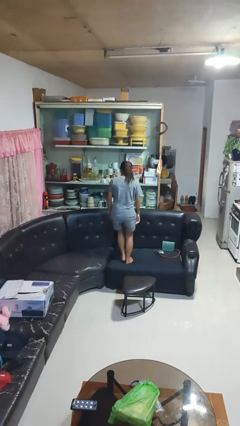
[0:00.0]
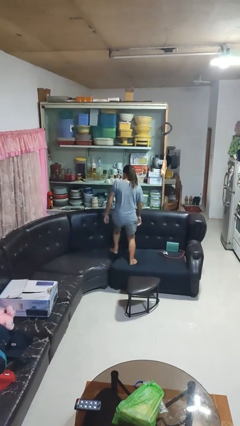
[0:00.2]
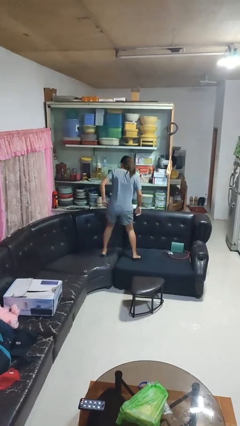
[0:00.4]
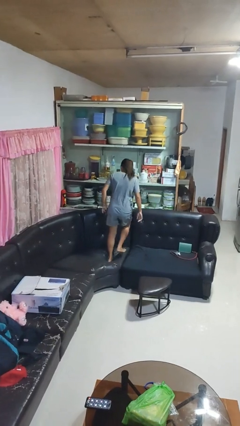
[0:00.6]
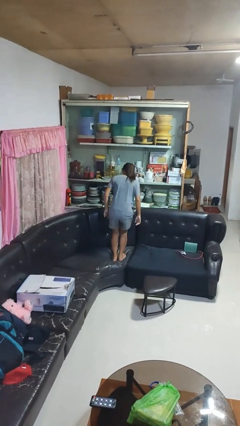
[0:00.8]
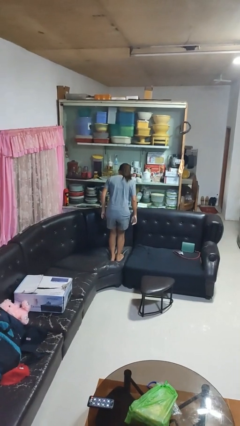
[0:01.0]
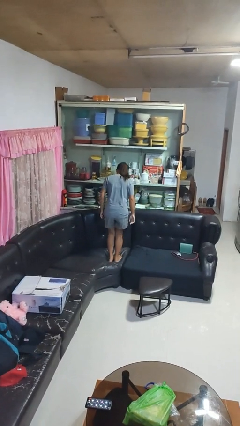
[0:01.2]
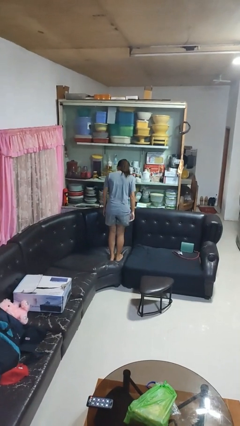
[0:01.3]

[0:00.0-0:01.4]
person jumps on couch

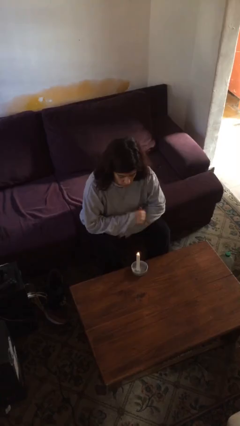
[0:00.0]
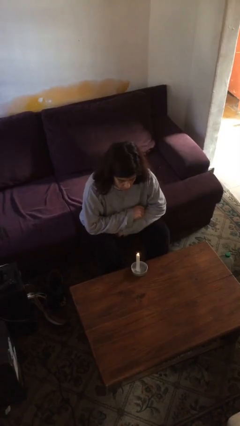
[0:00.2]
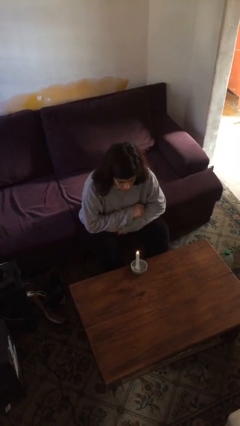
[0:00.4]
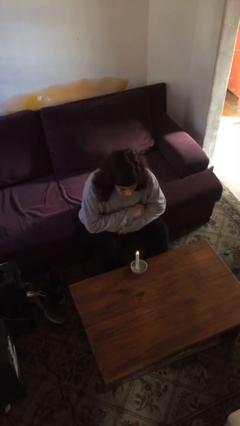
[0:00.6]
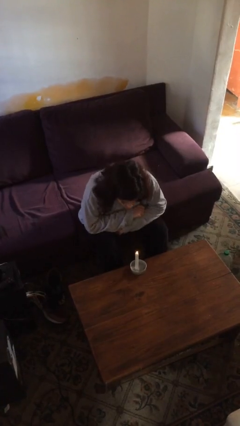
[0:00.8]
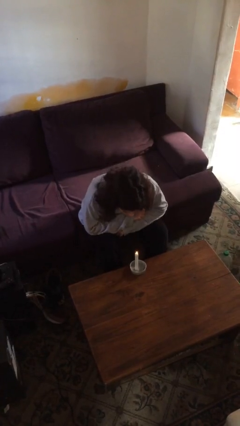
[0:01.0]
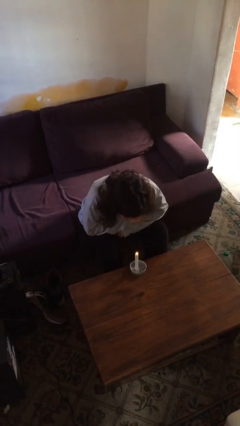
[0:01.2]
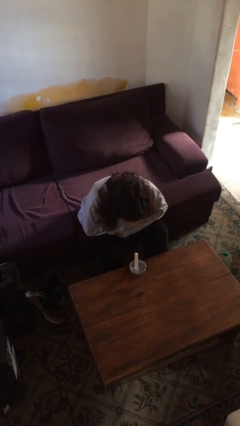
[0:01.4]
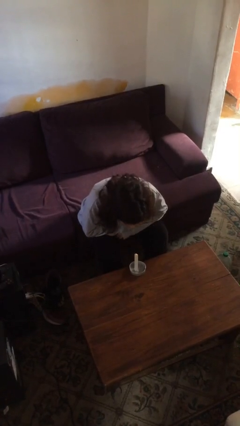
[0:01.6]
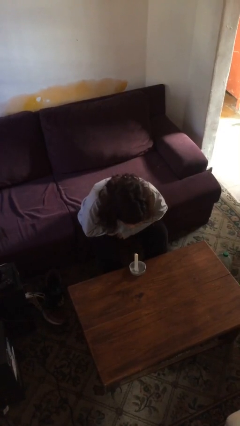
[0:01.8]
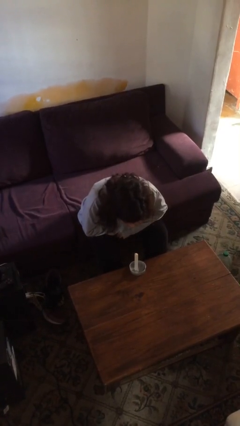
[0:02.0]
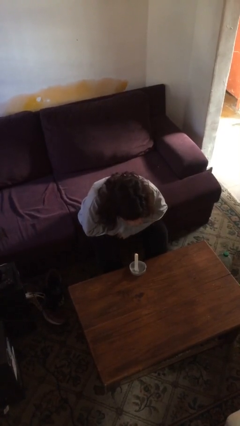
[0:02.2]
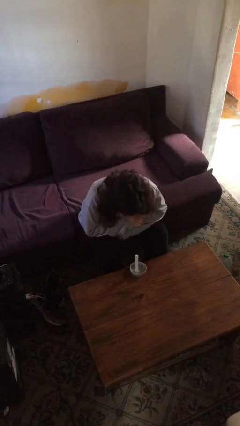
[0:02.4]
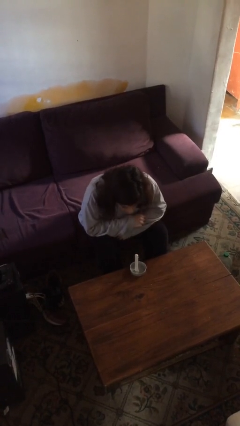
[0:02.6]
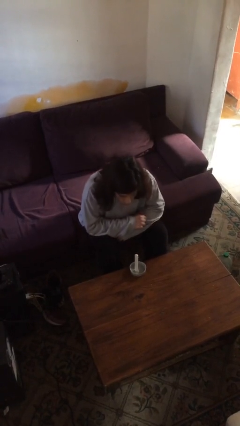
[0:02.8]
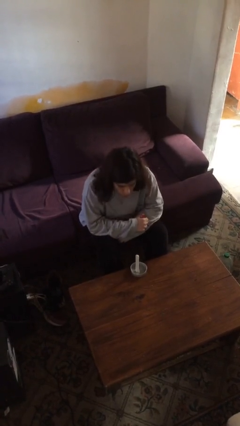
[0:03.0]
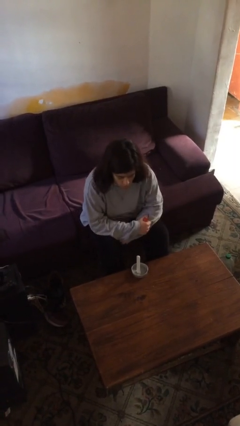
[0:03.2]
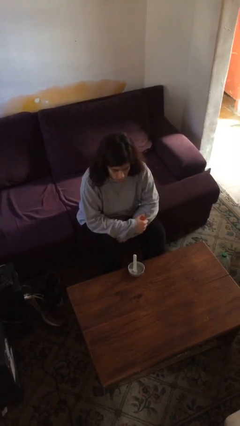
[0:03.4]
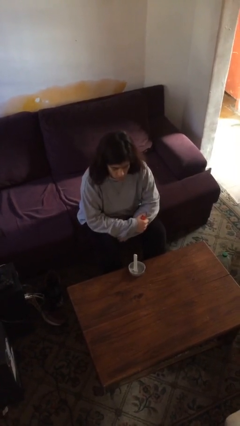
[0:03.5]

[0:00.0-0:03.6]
person extinguishes candle

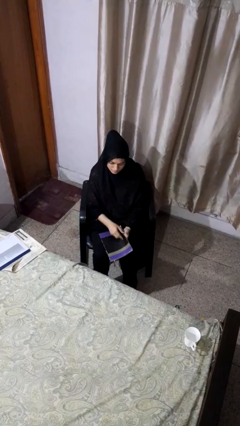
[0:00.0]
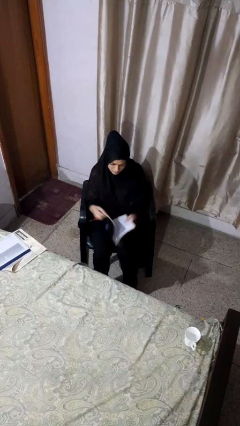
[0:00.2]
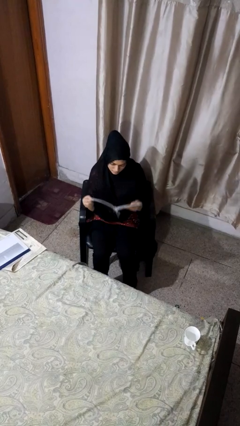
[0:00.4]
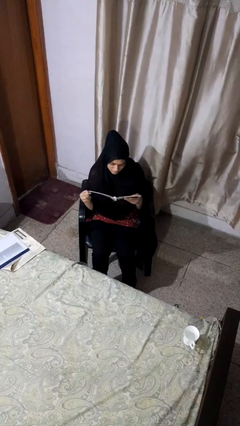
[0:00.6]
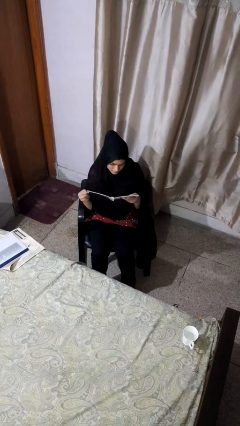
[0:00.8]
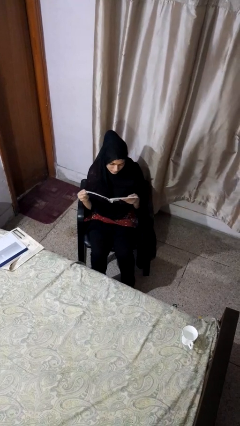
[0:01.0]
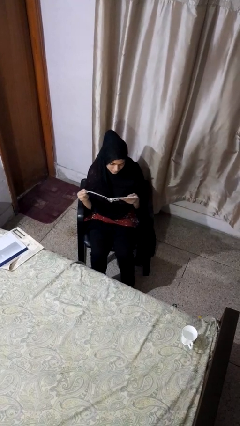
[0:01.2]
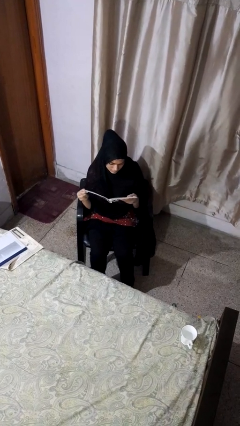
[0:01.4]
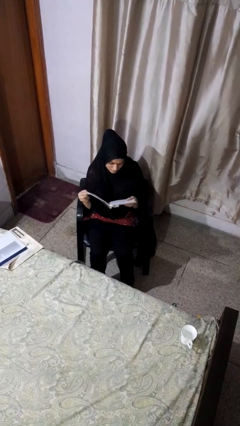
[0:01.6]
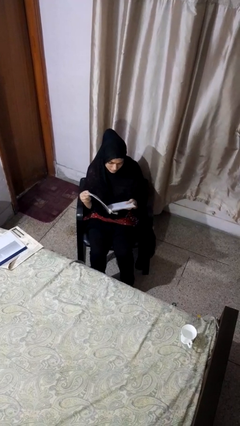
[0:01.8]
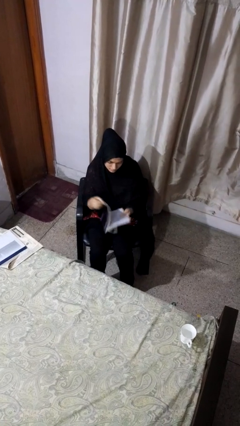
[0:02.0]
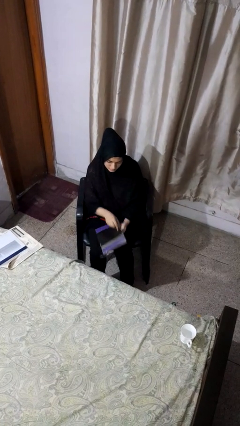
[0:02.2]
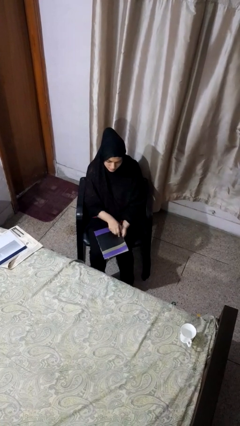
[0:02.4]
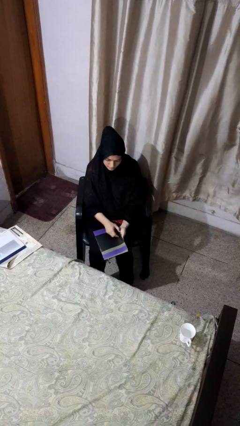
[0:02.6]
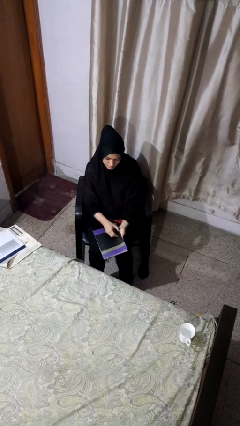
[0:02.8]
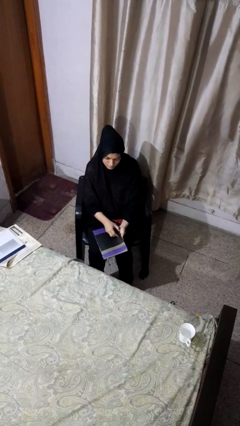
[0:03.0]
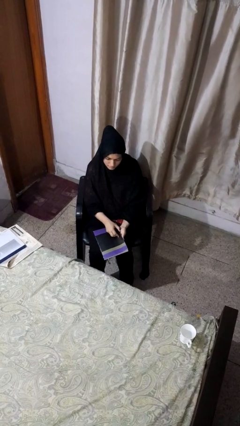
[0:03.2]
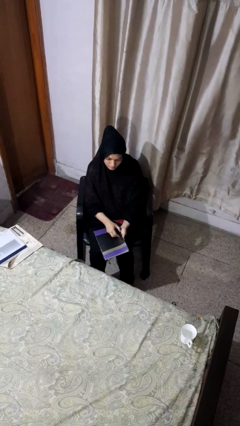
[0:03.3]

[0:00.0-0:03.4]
person reads book

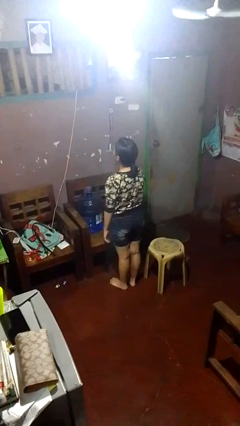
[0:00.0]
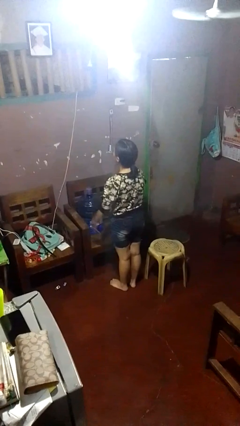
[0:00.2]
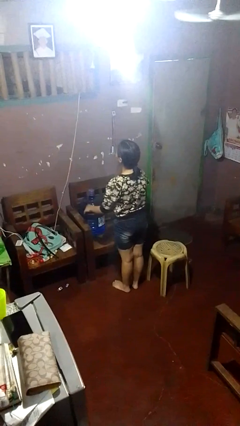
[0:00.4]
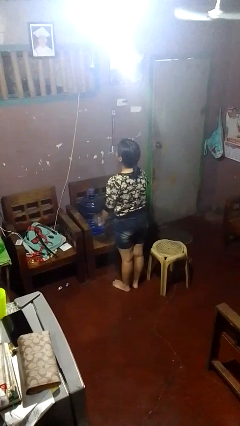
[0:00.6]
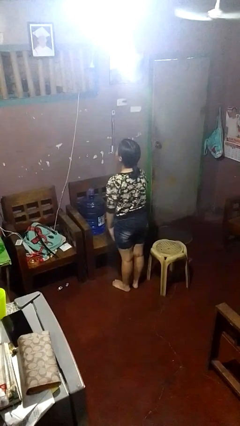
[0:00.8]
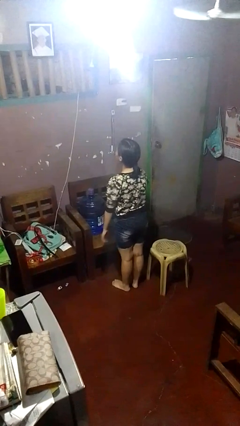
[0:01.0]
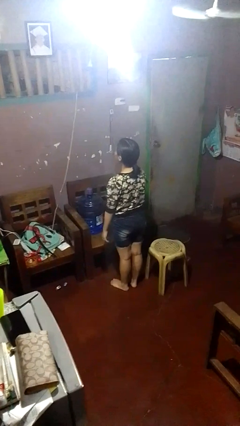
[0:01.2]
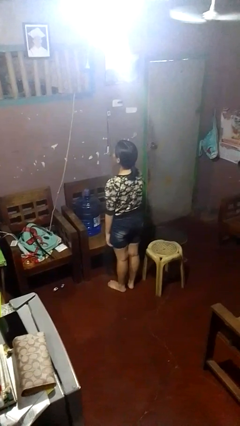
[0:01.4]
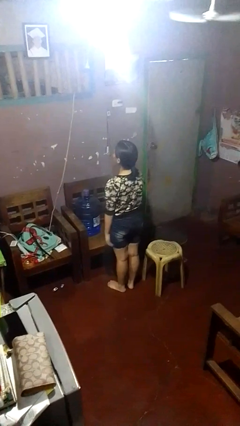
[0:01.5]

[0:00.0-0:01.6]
person slaps hands on thighs

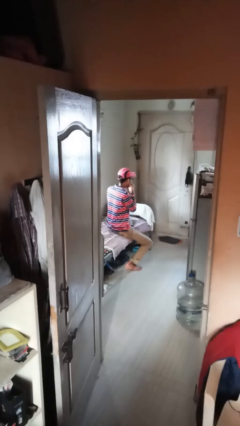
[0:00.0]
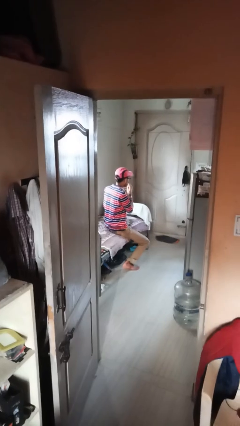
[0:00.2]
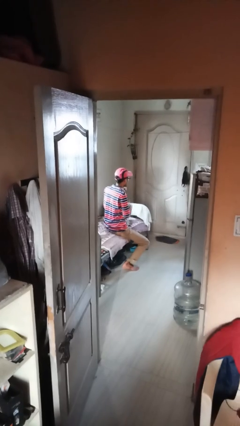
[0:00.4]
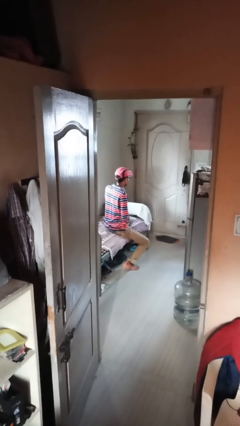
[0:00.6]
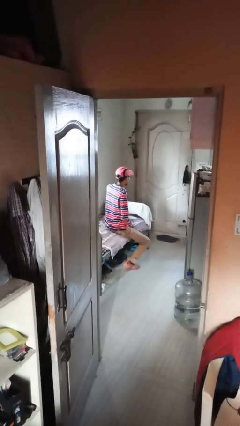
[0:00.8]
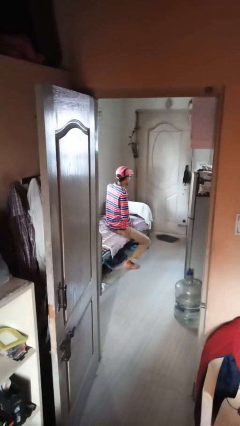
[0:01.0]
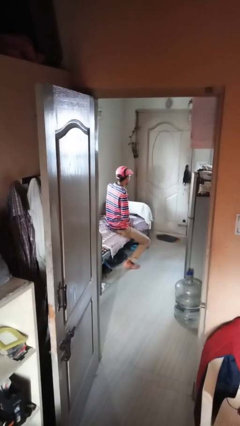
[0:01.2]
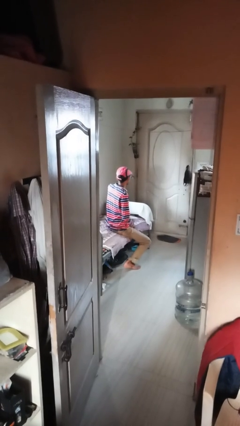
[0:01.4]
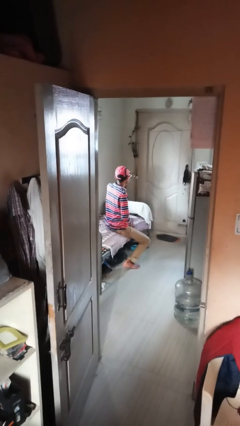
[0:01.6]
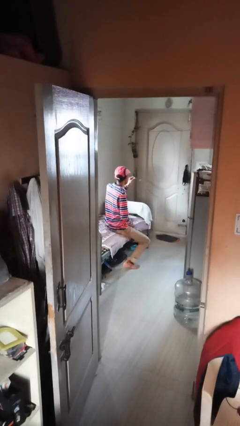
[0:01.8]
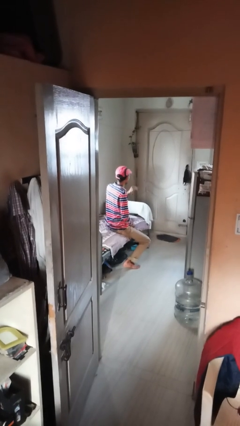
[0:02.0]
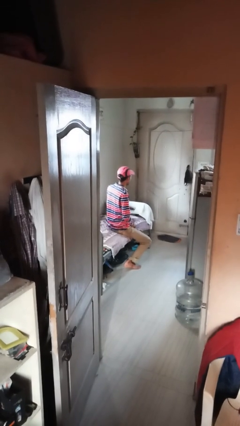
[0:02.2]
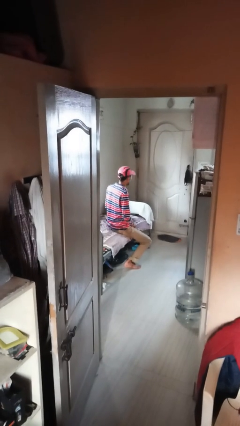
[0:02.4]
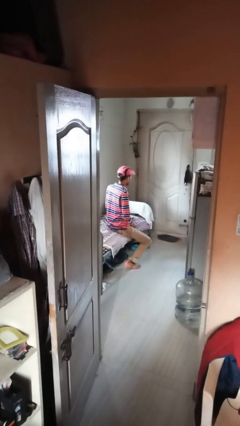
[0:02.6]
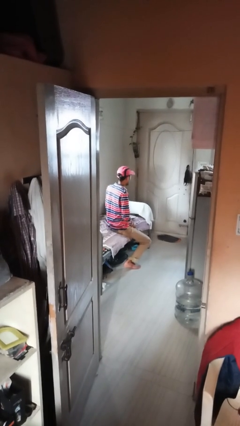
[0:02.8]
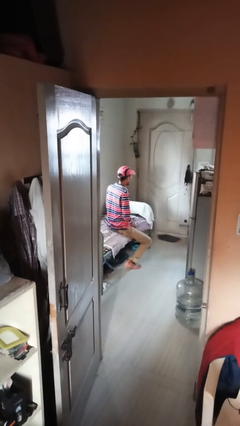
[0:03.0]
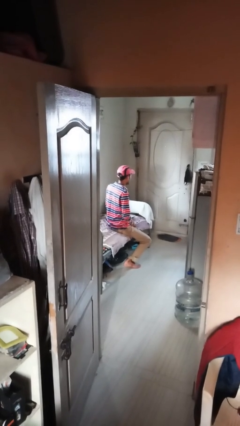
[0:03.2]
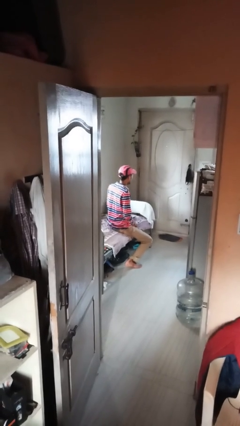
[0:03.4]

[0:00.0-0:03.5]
person takes off glasses

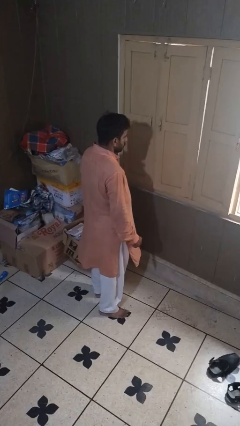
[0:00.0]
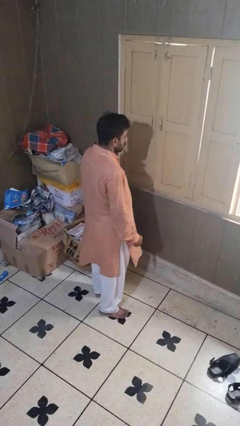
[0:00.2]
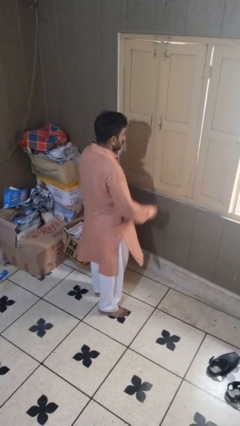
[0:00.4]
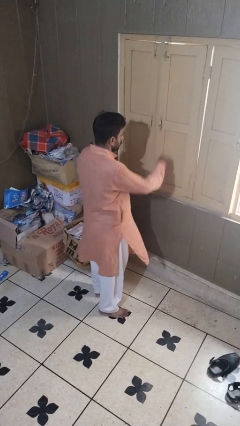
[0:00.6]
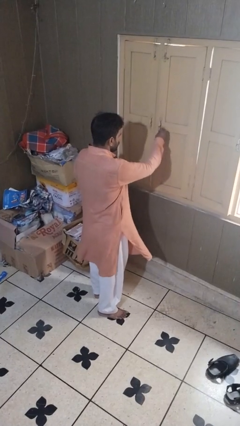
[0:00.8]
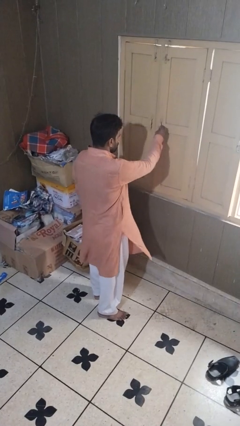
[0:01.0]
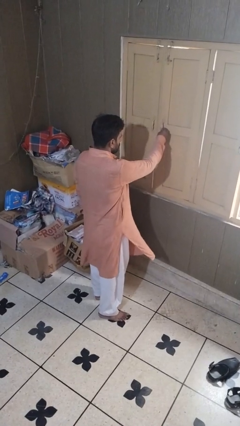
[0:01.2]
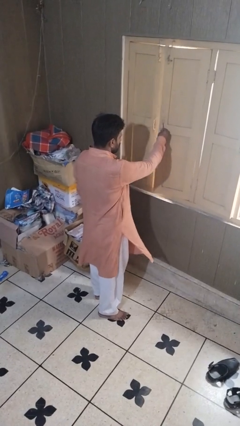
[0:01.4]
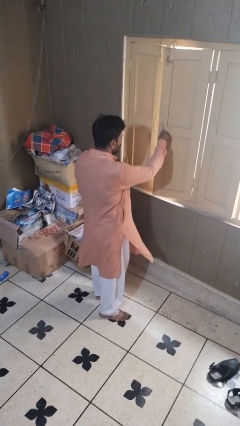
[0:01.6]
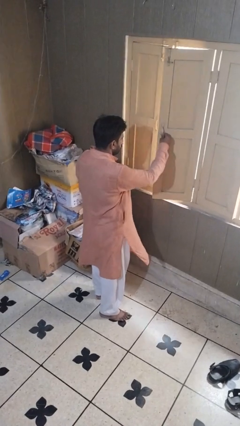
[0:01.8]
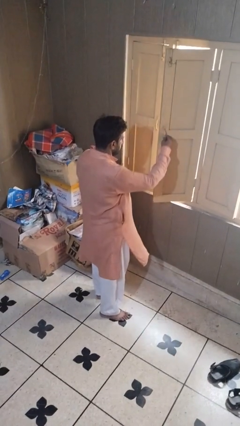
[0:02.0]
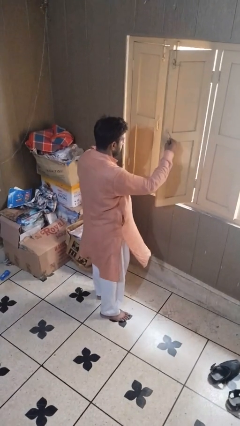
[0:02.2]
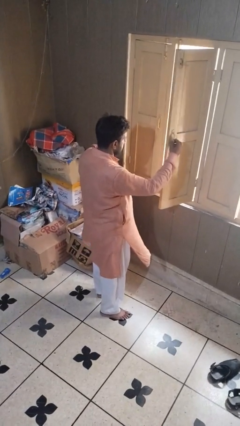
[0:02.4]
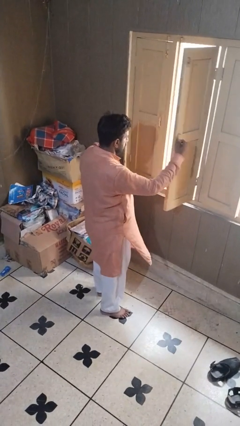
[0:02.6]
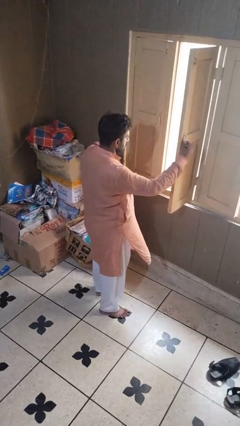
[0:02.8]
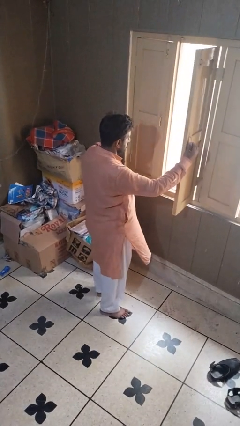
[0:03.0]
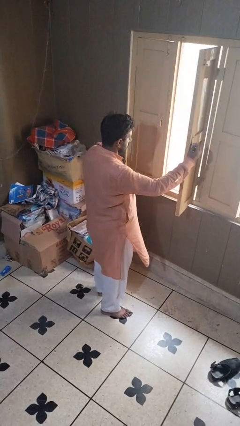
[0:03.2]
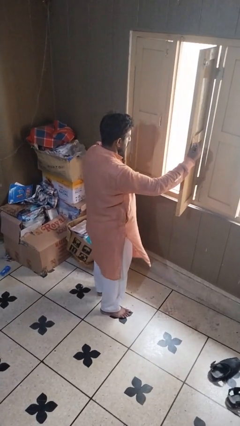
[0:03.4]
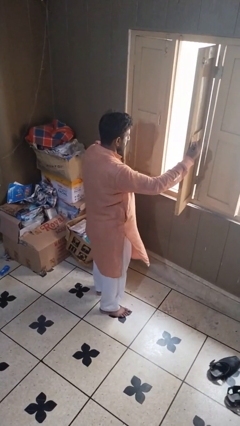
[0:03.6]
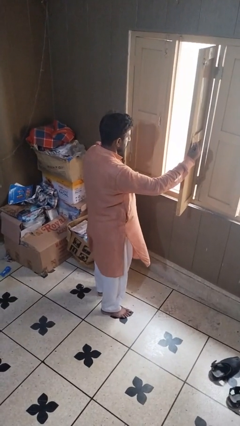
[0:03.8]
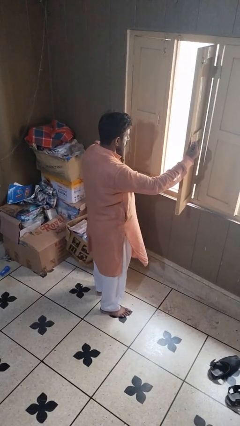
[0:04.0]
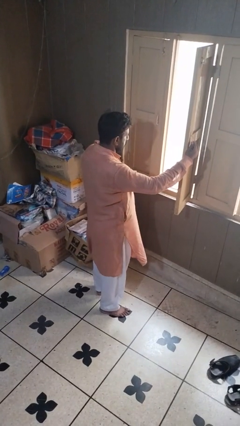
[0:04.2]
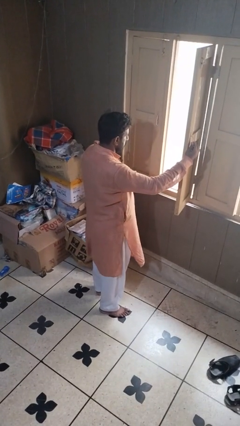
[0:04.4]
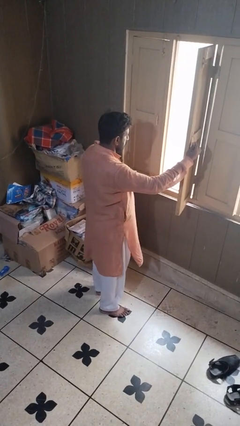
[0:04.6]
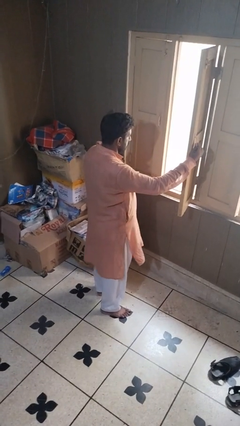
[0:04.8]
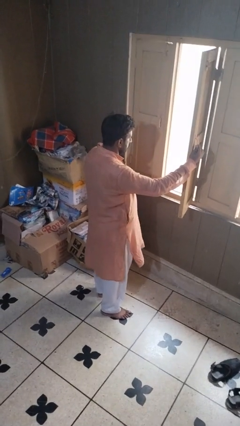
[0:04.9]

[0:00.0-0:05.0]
person opens home window
